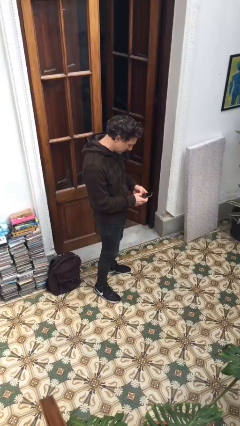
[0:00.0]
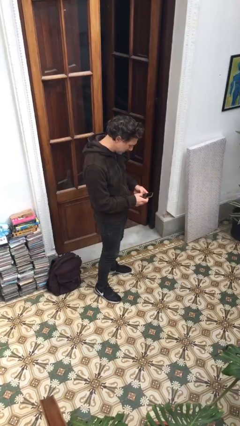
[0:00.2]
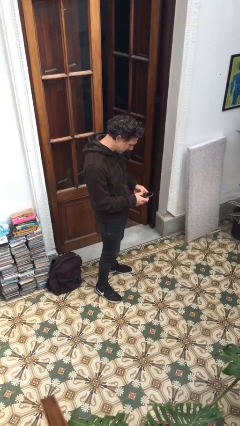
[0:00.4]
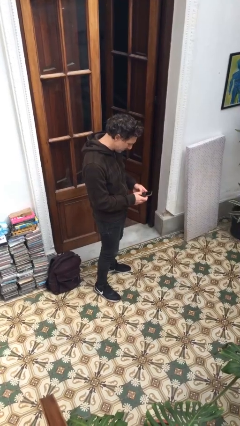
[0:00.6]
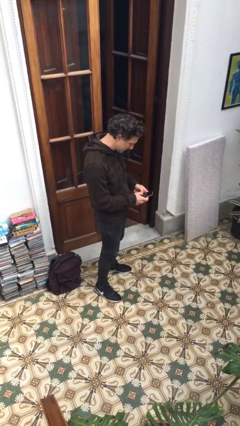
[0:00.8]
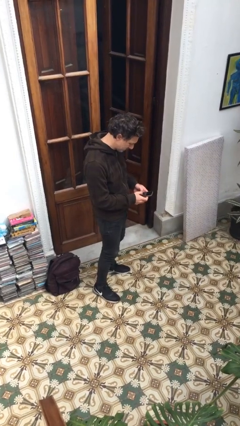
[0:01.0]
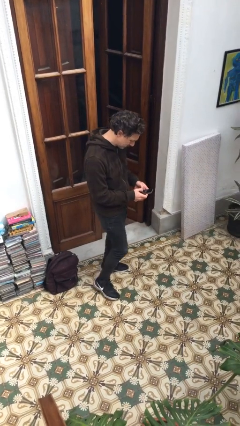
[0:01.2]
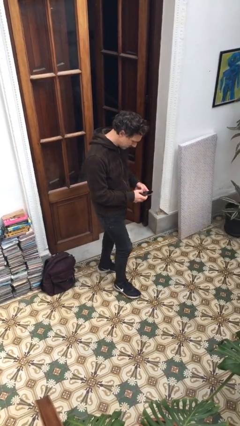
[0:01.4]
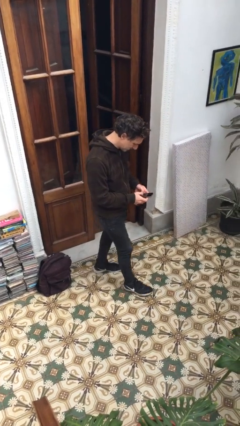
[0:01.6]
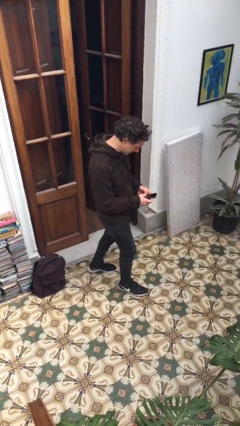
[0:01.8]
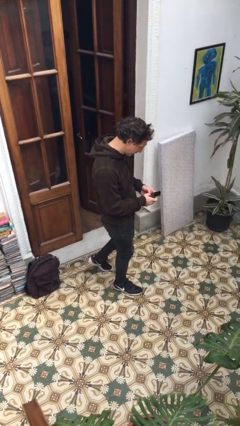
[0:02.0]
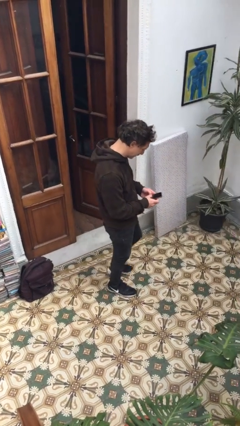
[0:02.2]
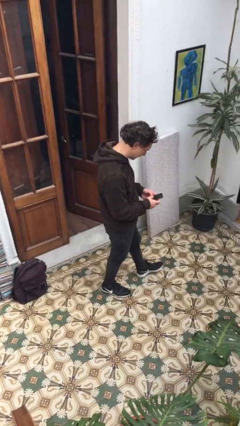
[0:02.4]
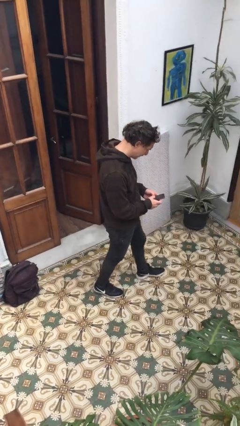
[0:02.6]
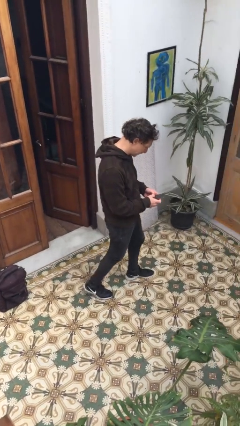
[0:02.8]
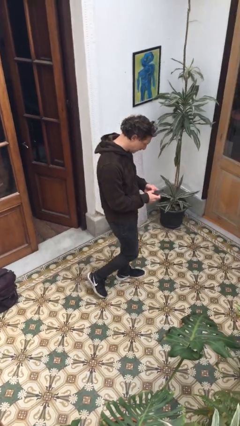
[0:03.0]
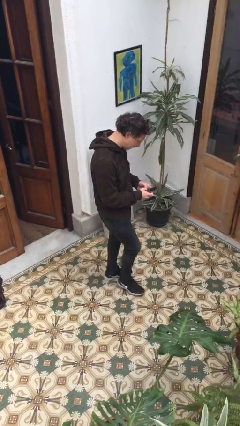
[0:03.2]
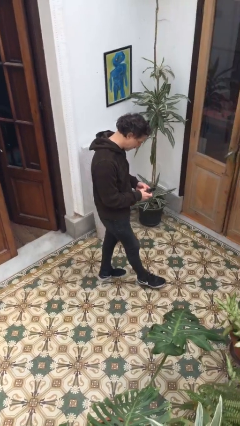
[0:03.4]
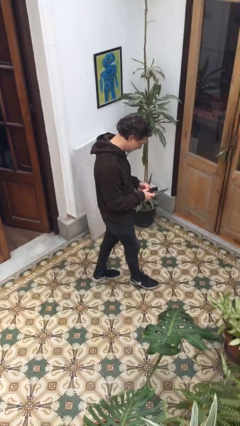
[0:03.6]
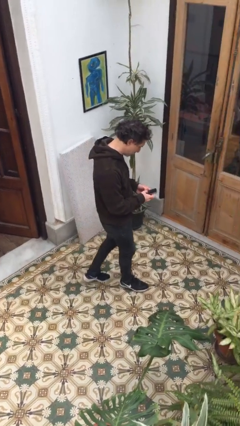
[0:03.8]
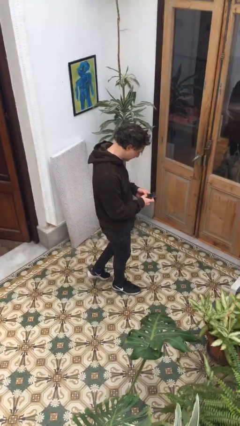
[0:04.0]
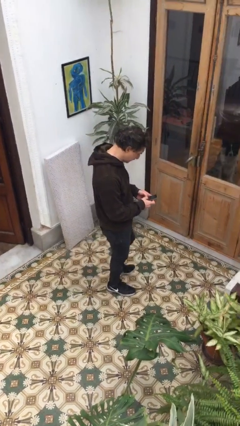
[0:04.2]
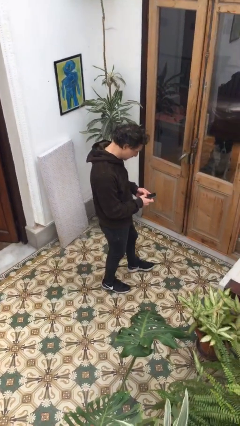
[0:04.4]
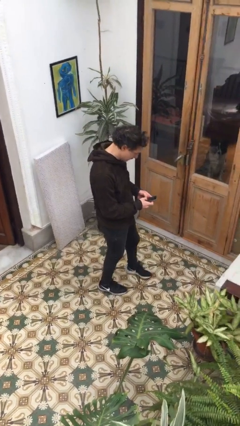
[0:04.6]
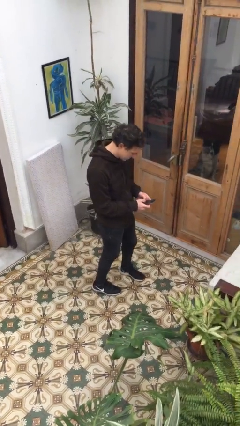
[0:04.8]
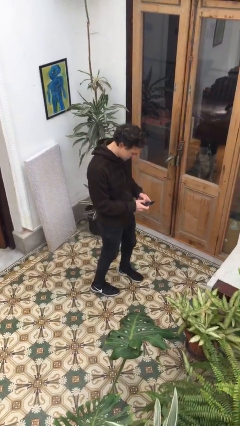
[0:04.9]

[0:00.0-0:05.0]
person texts on phone

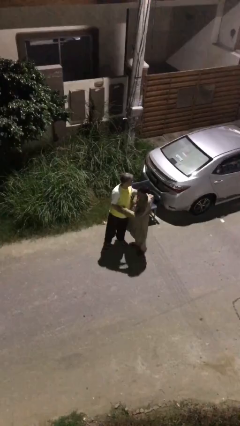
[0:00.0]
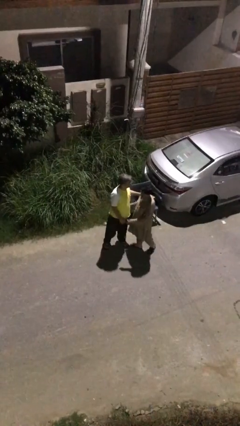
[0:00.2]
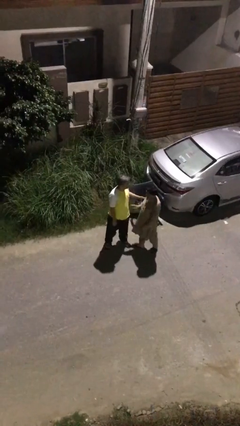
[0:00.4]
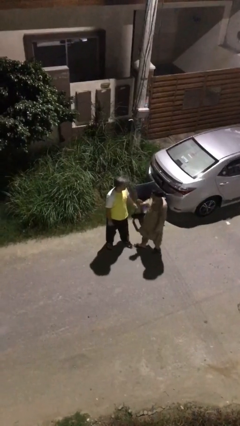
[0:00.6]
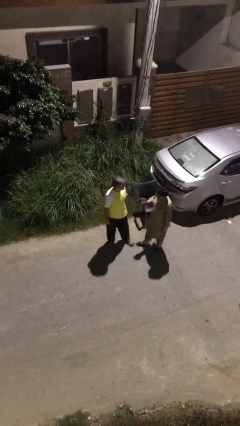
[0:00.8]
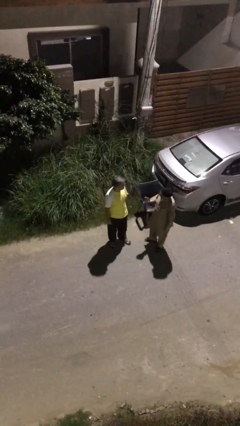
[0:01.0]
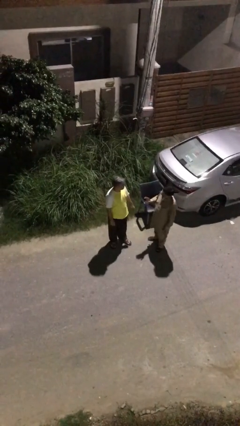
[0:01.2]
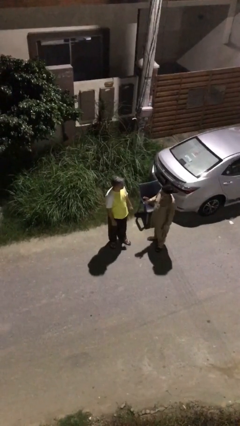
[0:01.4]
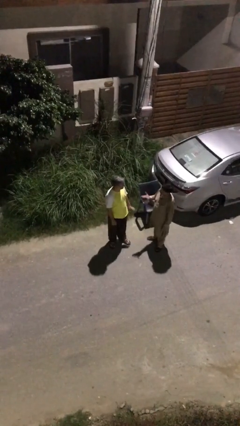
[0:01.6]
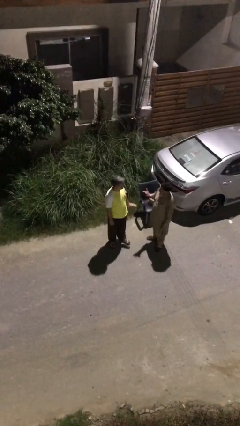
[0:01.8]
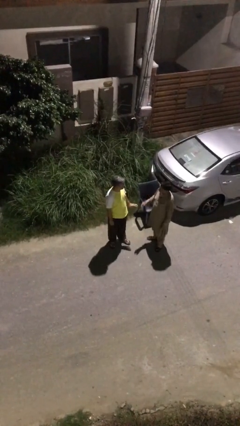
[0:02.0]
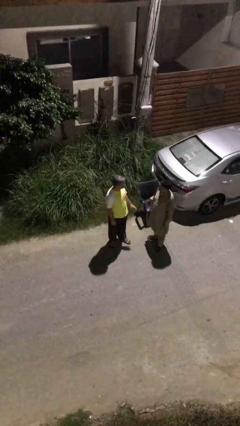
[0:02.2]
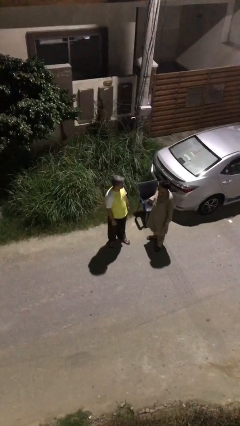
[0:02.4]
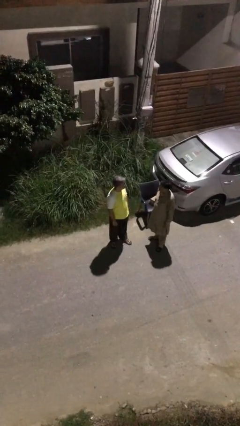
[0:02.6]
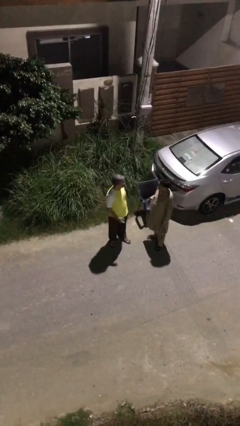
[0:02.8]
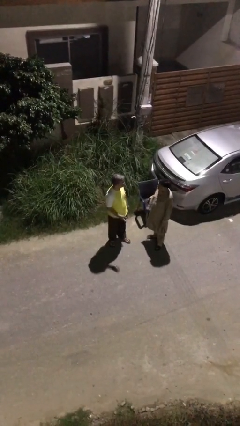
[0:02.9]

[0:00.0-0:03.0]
person talks to person

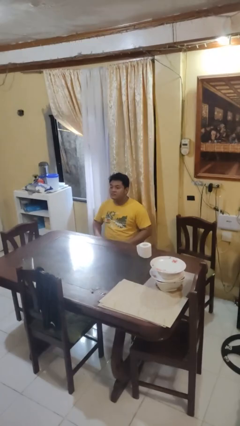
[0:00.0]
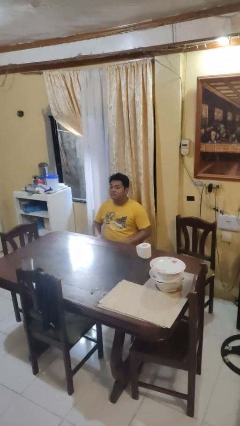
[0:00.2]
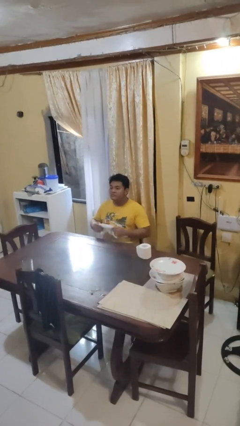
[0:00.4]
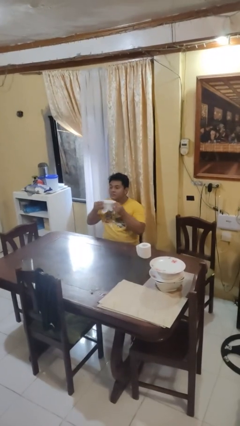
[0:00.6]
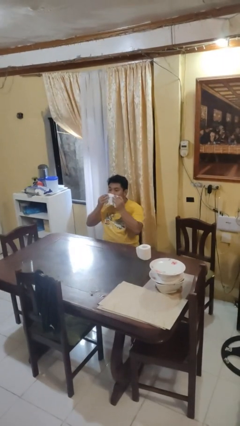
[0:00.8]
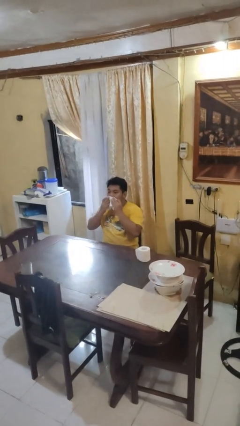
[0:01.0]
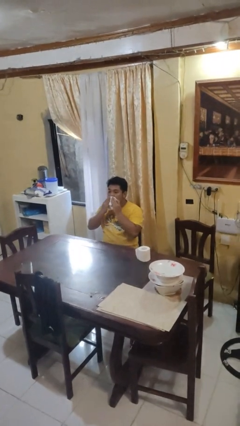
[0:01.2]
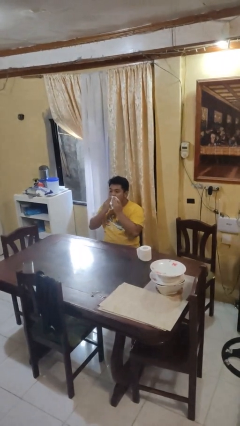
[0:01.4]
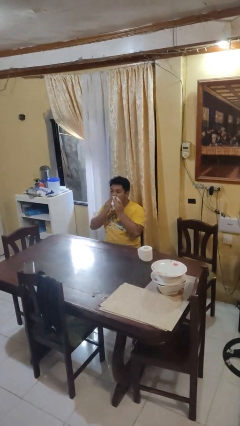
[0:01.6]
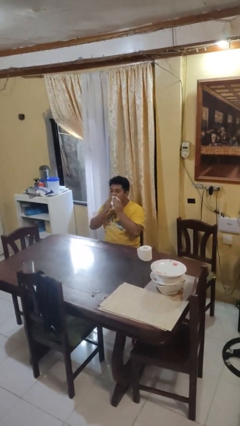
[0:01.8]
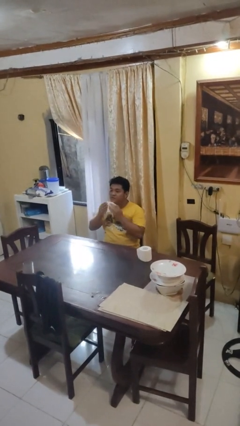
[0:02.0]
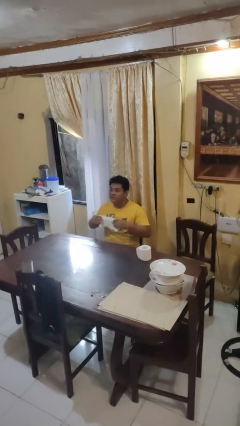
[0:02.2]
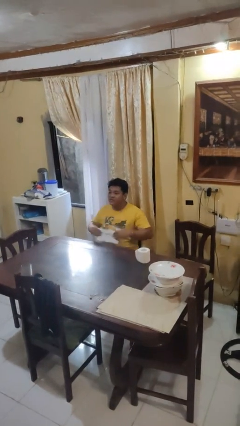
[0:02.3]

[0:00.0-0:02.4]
person wipes mouth with napkin

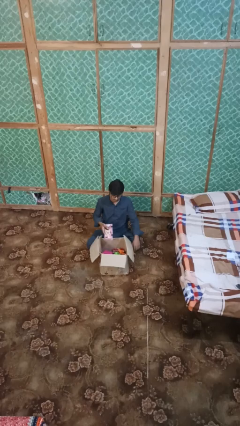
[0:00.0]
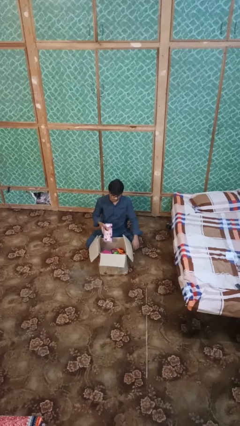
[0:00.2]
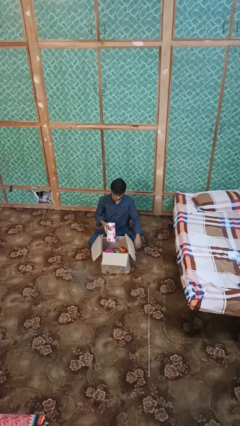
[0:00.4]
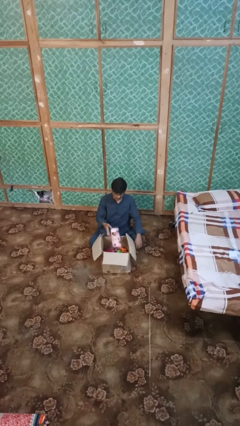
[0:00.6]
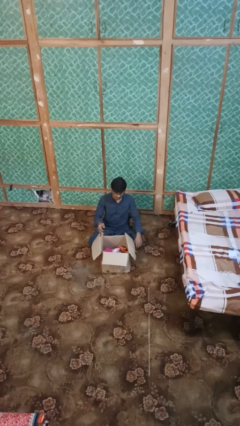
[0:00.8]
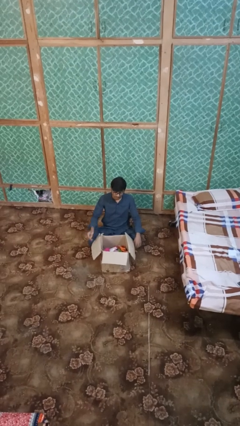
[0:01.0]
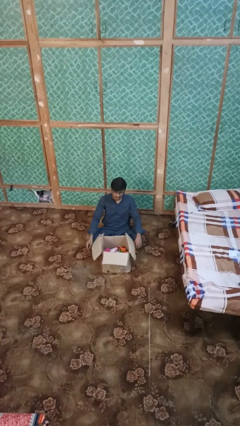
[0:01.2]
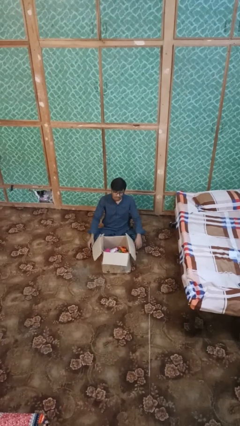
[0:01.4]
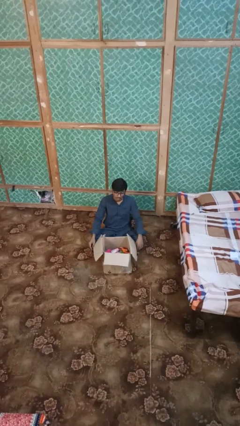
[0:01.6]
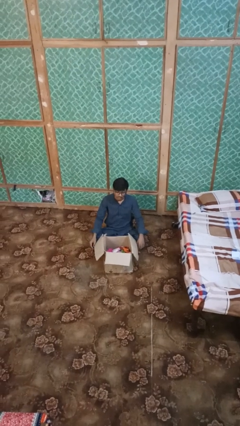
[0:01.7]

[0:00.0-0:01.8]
person puts object into box

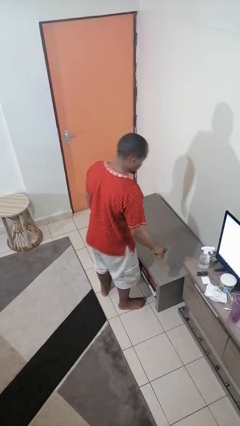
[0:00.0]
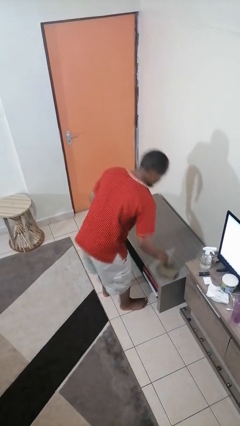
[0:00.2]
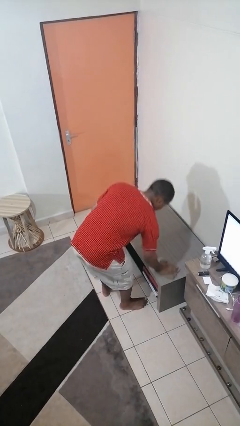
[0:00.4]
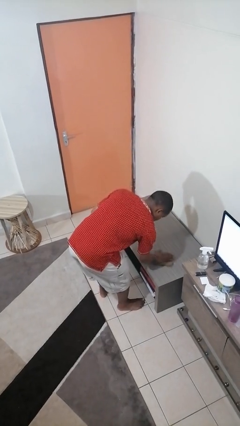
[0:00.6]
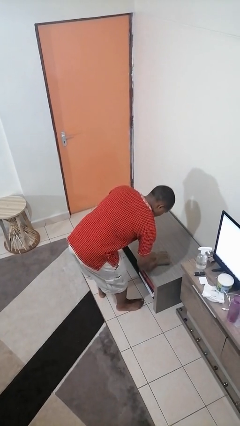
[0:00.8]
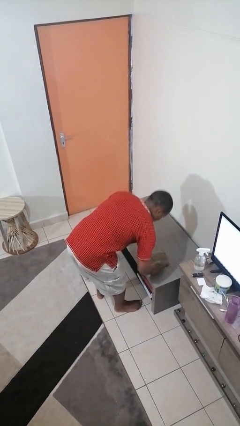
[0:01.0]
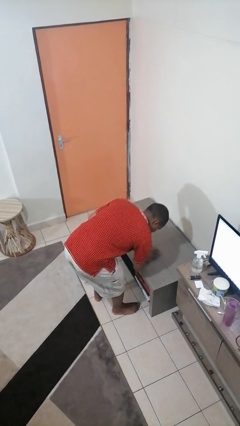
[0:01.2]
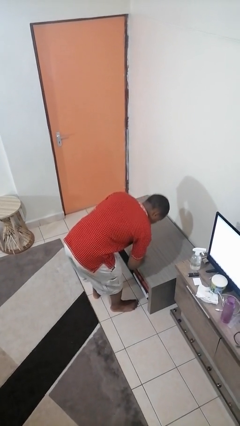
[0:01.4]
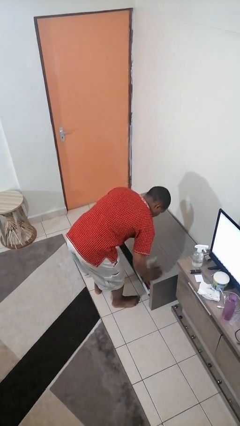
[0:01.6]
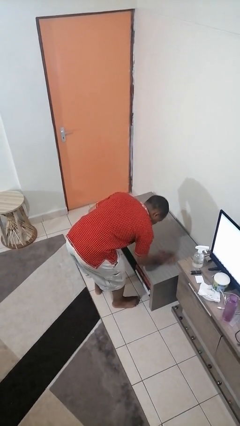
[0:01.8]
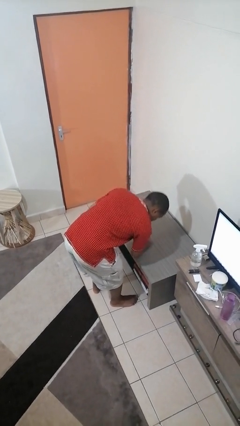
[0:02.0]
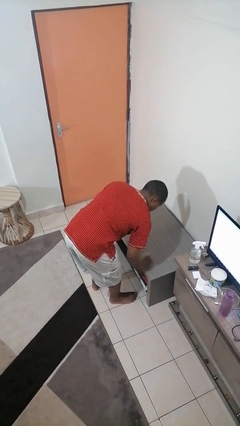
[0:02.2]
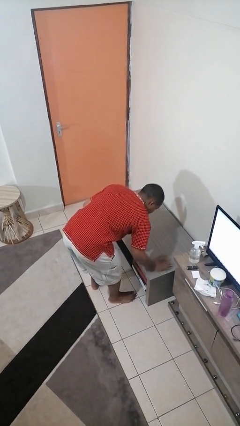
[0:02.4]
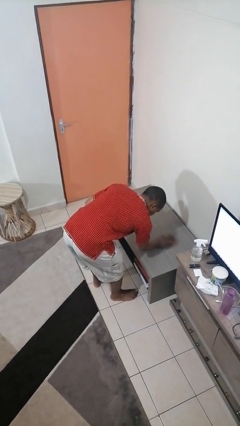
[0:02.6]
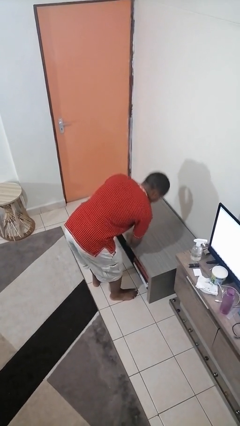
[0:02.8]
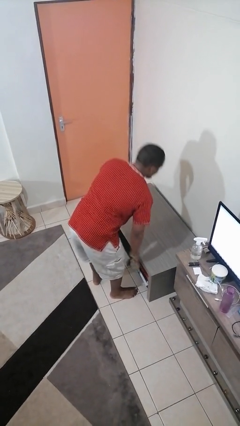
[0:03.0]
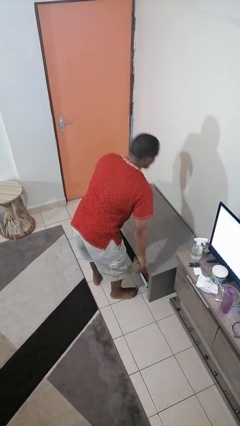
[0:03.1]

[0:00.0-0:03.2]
person cleans table with rag

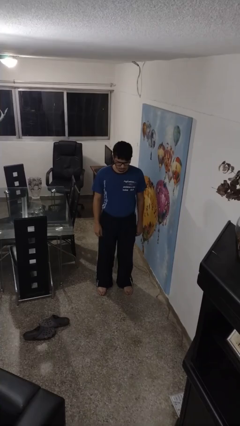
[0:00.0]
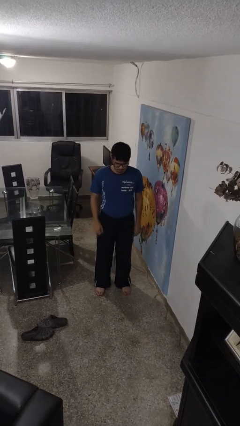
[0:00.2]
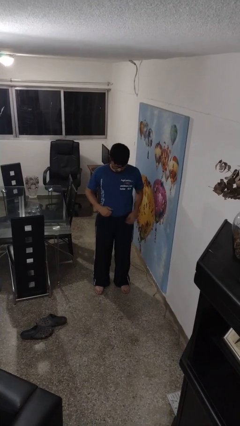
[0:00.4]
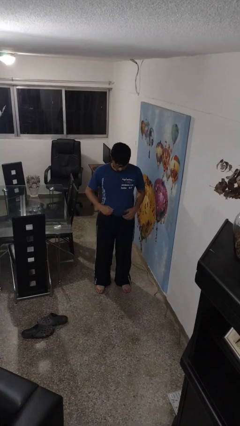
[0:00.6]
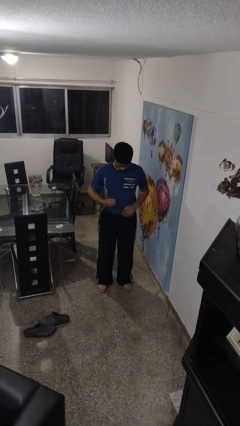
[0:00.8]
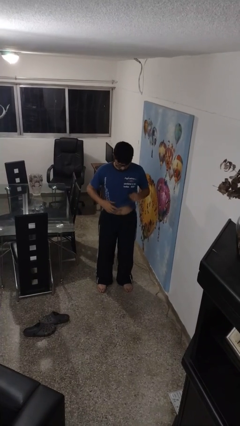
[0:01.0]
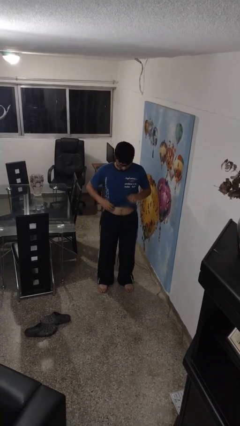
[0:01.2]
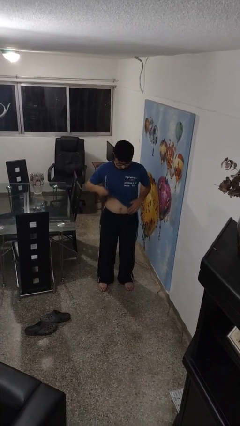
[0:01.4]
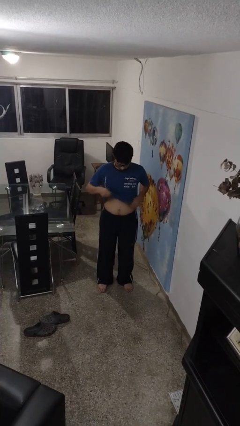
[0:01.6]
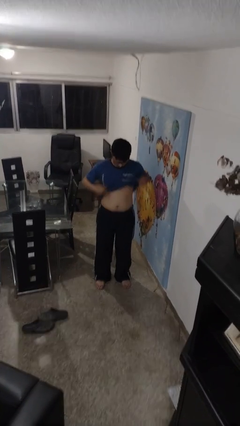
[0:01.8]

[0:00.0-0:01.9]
person untucks shirt

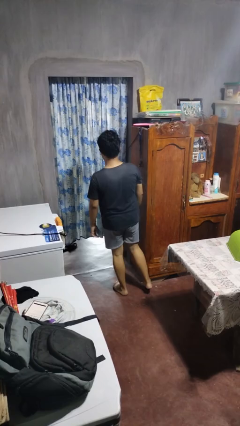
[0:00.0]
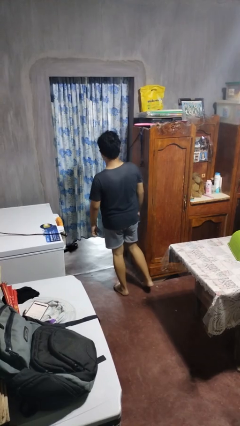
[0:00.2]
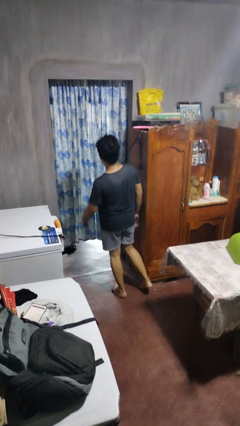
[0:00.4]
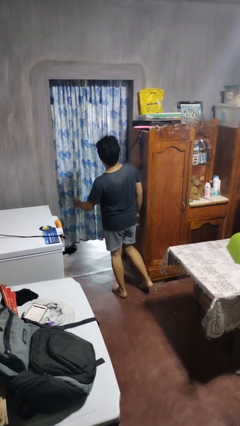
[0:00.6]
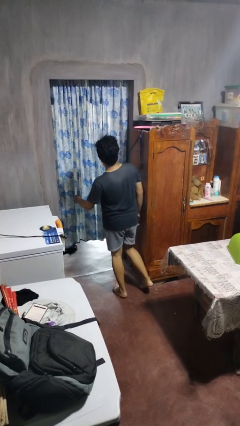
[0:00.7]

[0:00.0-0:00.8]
person stubs toe
